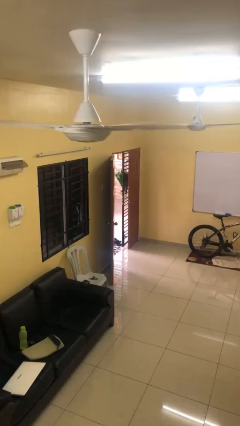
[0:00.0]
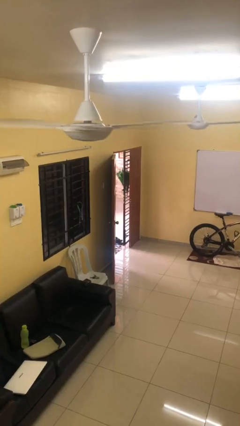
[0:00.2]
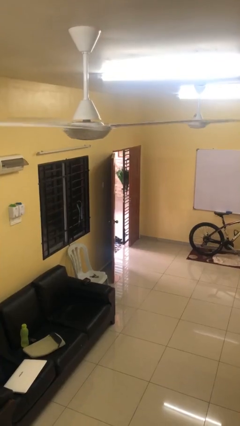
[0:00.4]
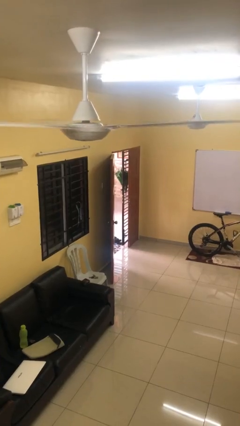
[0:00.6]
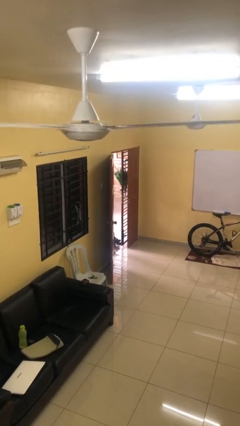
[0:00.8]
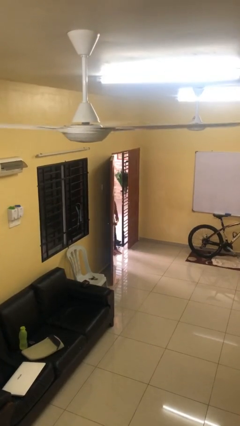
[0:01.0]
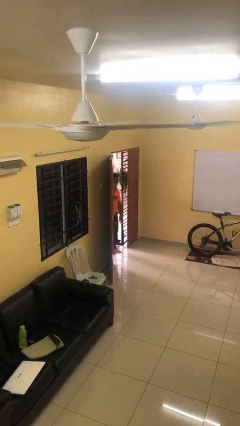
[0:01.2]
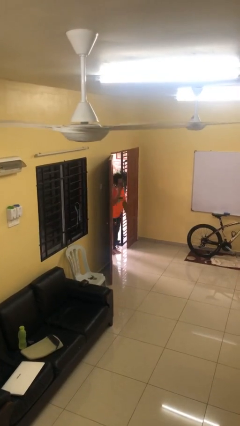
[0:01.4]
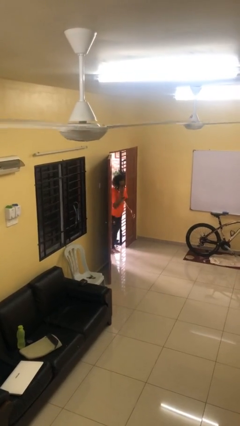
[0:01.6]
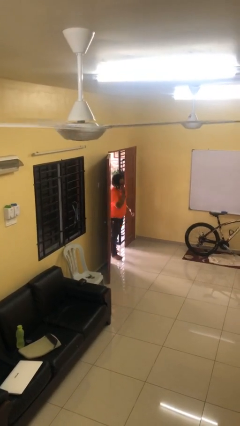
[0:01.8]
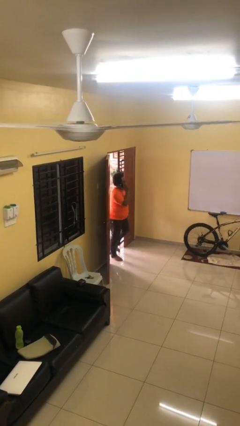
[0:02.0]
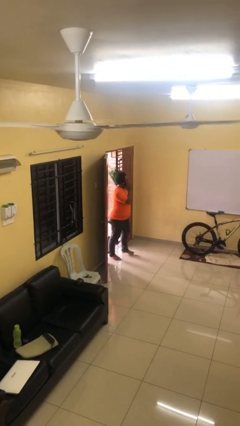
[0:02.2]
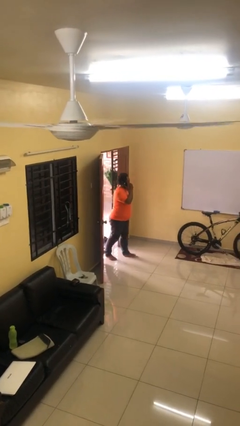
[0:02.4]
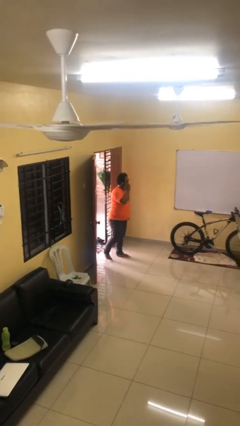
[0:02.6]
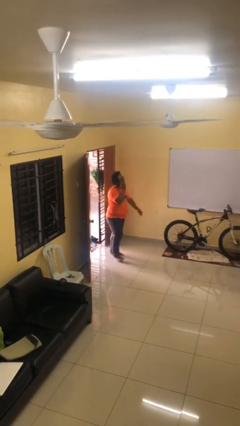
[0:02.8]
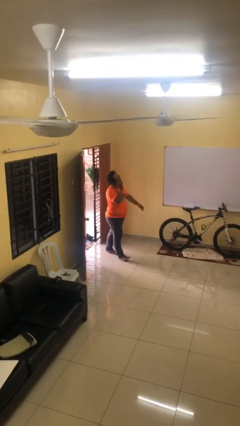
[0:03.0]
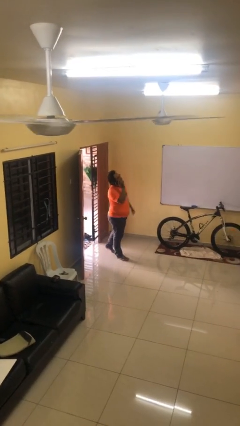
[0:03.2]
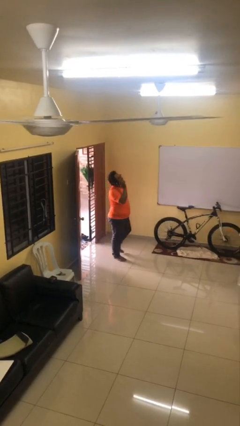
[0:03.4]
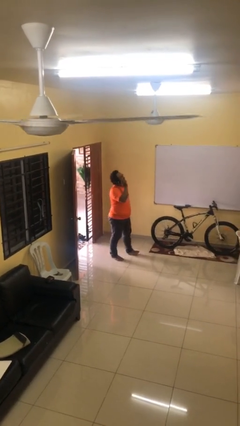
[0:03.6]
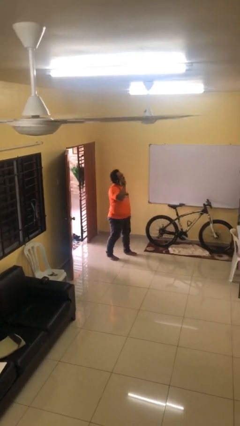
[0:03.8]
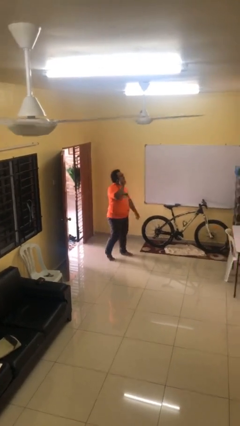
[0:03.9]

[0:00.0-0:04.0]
person enters scene through structure

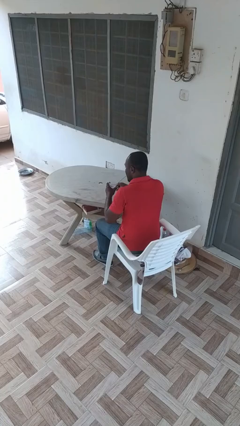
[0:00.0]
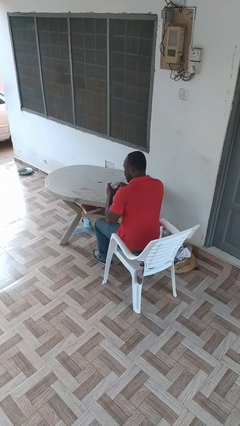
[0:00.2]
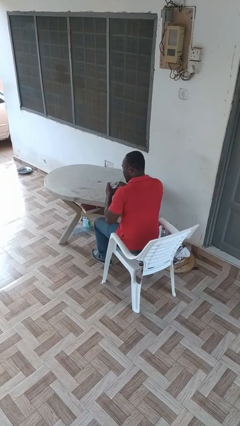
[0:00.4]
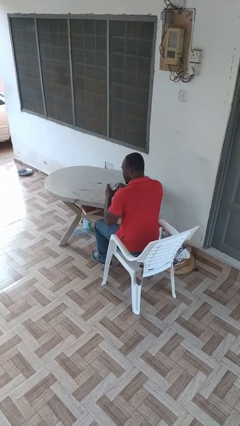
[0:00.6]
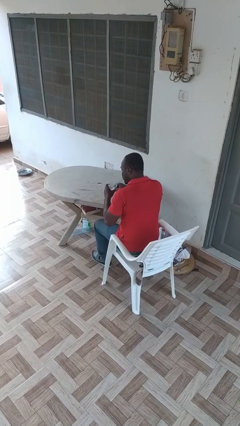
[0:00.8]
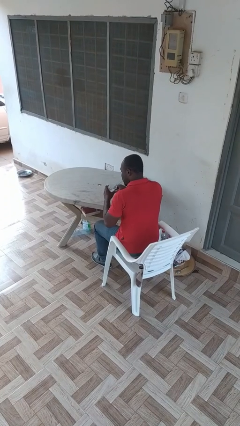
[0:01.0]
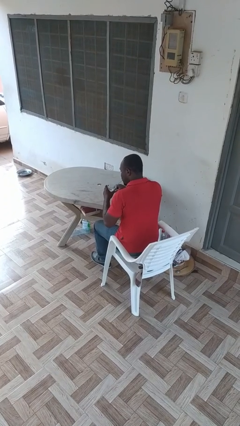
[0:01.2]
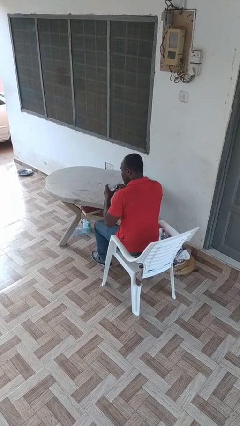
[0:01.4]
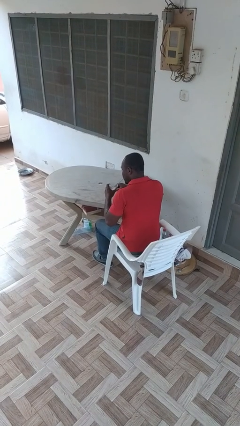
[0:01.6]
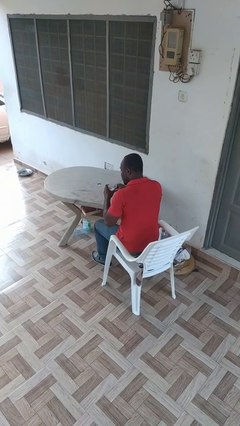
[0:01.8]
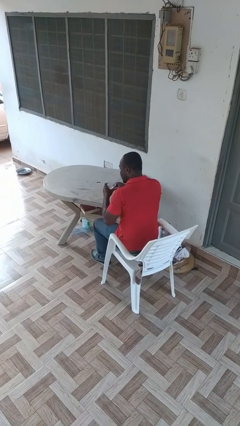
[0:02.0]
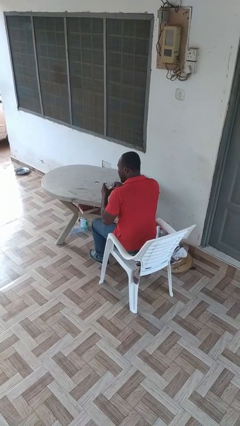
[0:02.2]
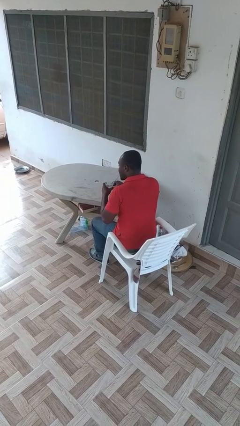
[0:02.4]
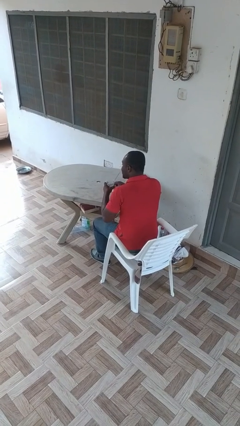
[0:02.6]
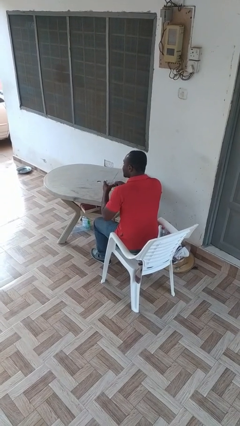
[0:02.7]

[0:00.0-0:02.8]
person drinks from straw

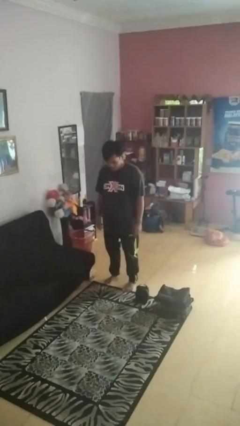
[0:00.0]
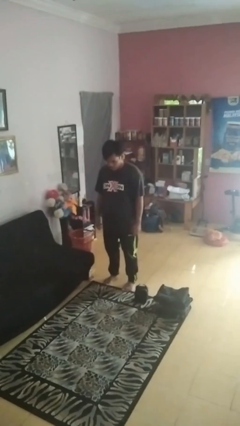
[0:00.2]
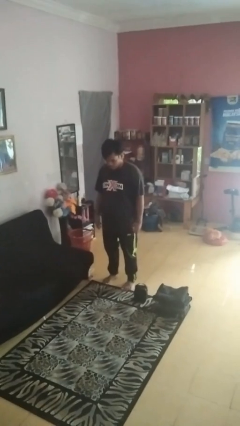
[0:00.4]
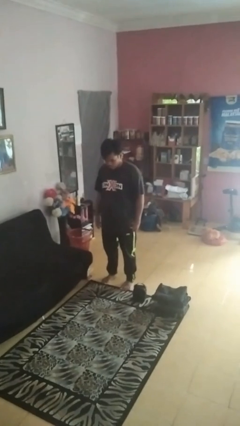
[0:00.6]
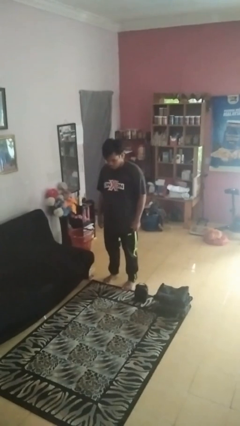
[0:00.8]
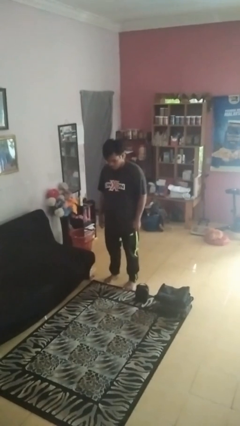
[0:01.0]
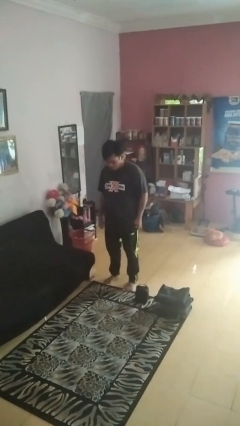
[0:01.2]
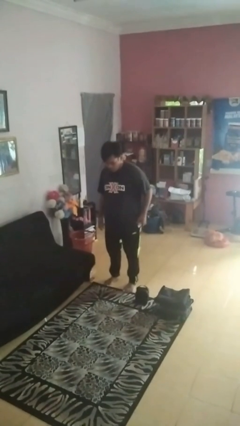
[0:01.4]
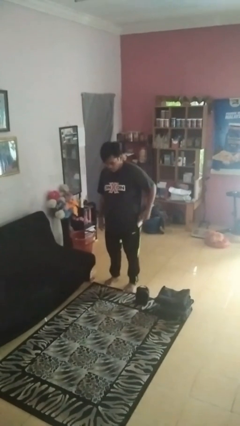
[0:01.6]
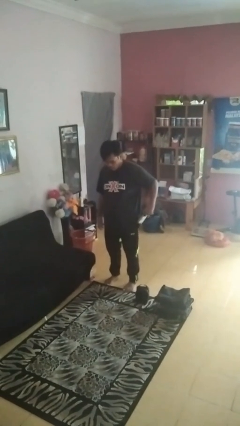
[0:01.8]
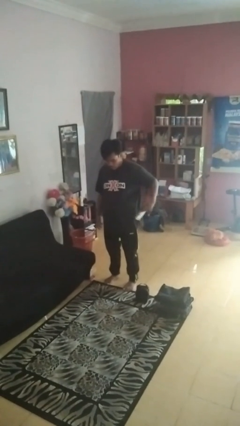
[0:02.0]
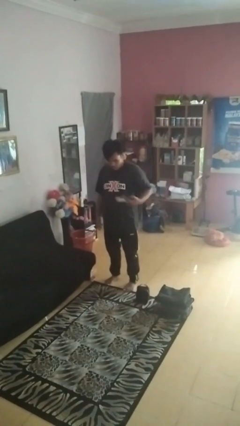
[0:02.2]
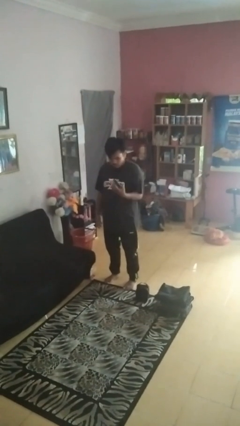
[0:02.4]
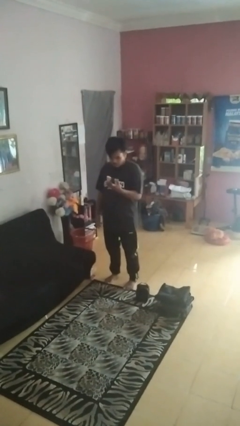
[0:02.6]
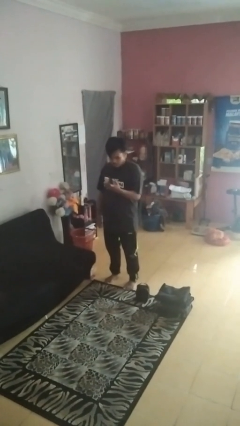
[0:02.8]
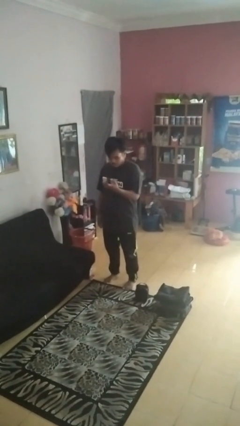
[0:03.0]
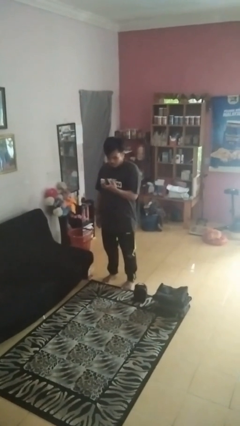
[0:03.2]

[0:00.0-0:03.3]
person takes phone from pocket

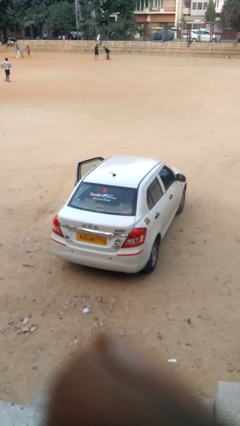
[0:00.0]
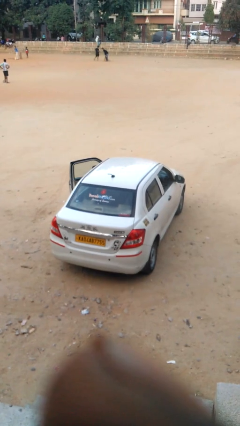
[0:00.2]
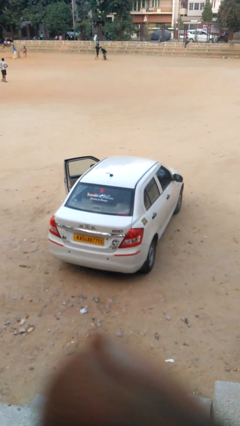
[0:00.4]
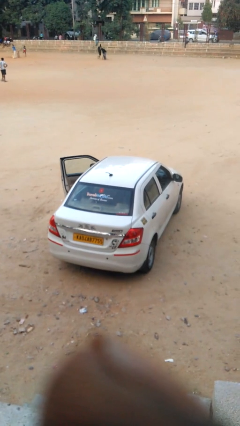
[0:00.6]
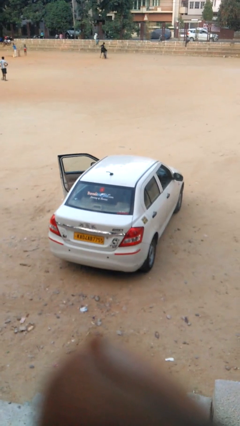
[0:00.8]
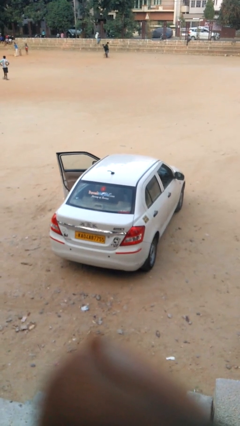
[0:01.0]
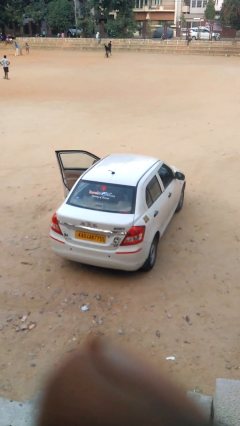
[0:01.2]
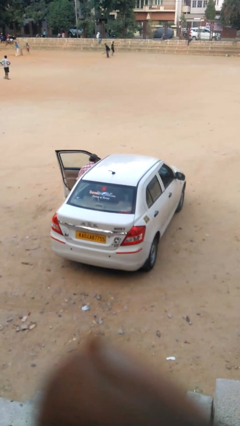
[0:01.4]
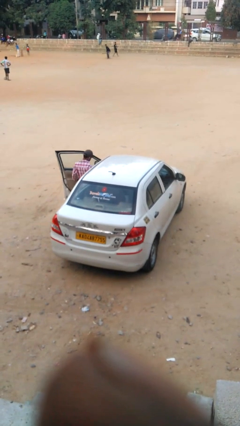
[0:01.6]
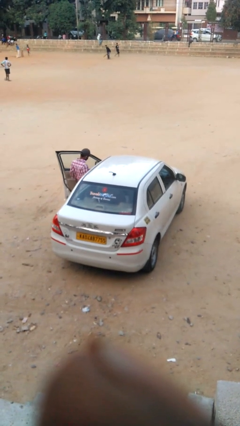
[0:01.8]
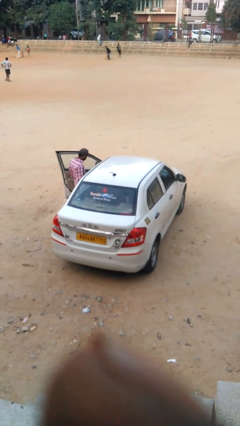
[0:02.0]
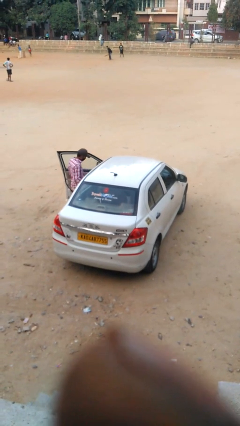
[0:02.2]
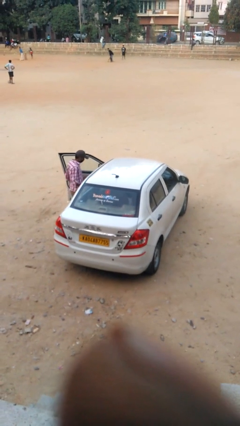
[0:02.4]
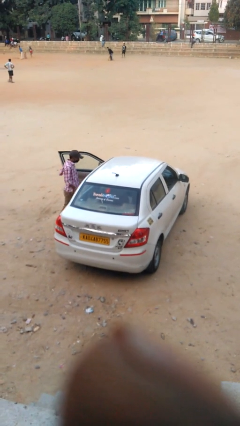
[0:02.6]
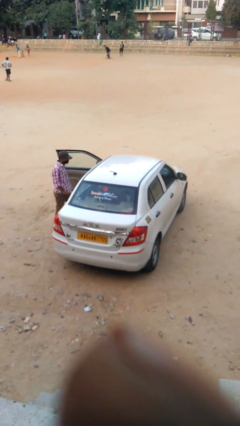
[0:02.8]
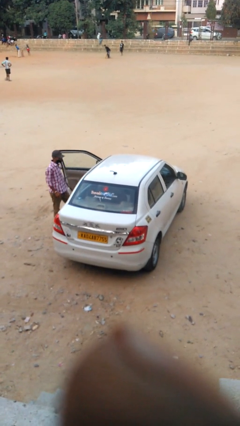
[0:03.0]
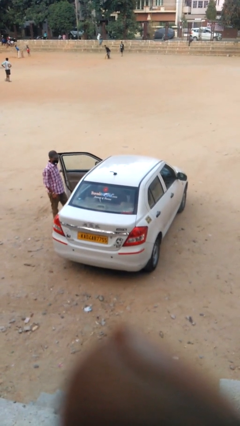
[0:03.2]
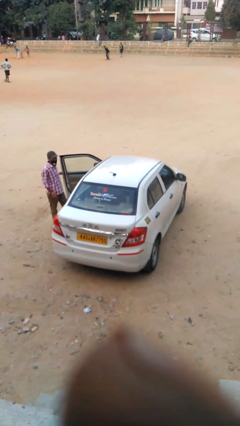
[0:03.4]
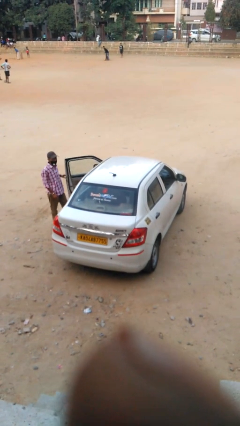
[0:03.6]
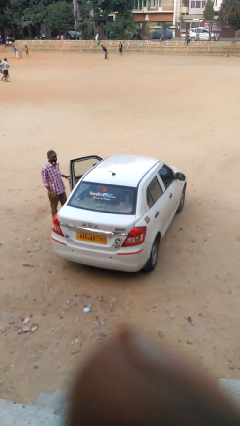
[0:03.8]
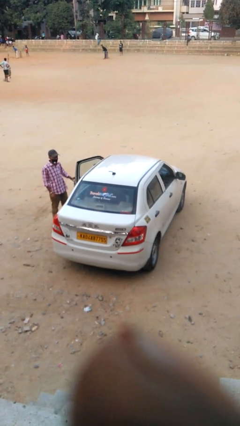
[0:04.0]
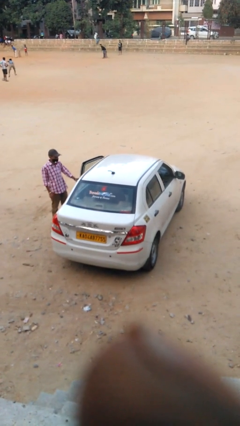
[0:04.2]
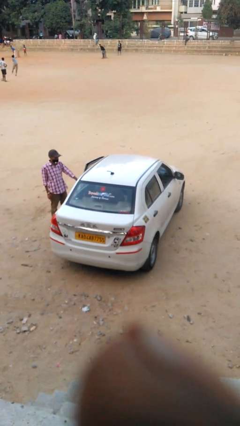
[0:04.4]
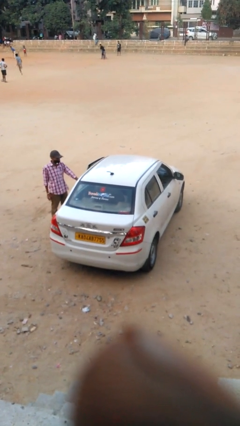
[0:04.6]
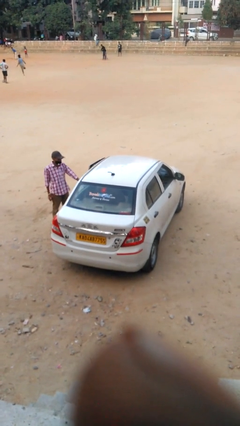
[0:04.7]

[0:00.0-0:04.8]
car drops off person

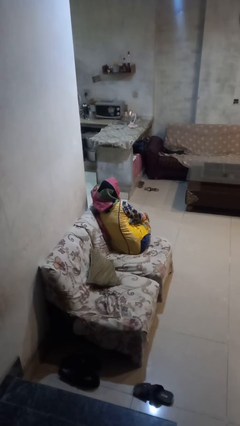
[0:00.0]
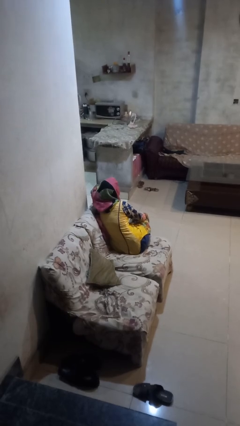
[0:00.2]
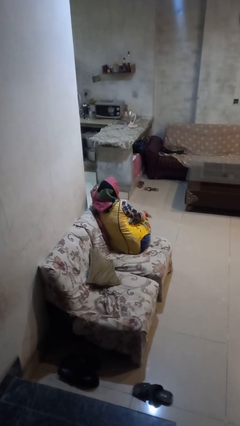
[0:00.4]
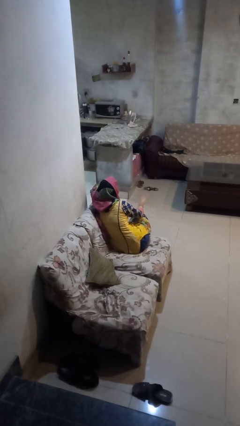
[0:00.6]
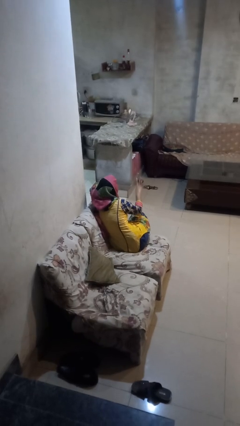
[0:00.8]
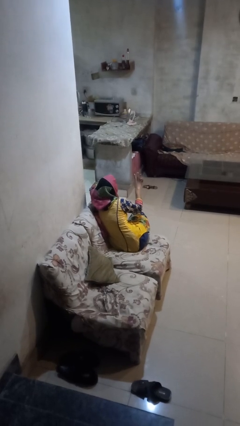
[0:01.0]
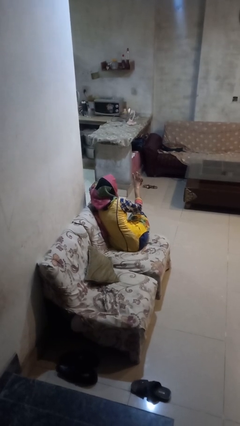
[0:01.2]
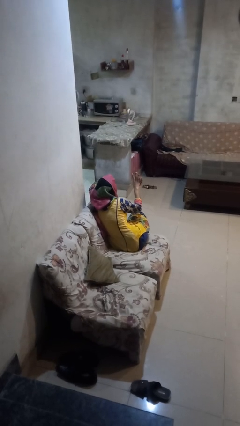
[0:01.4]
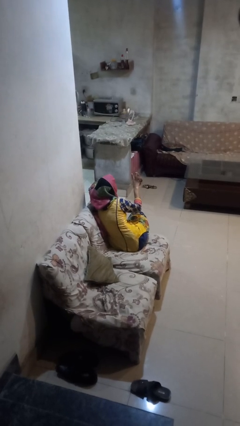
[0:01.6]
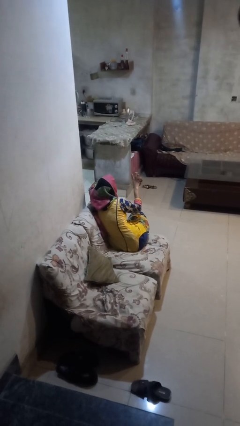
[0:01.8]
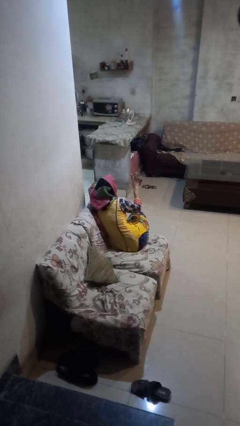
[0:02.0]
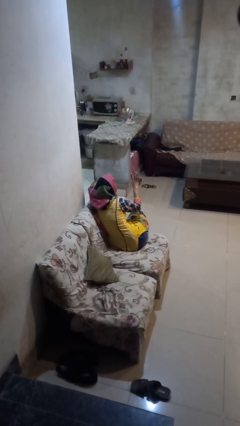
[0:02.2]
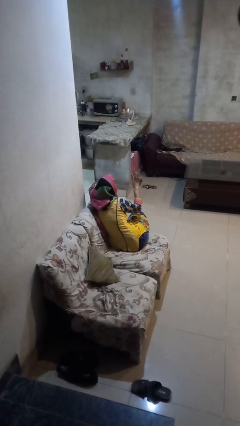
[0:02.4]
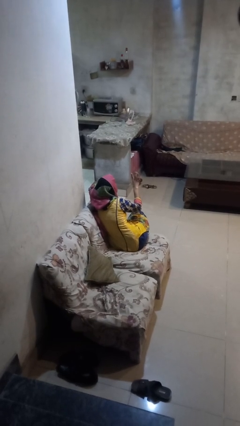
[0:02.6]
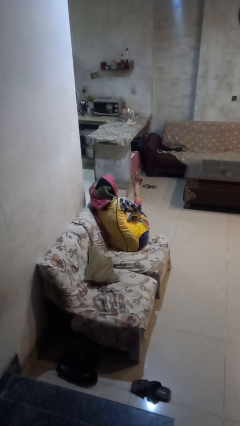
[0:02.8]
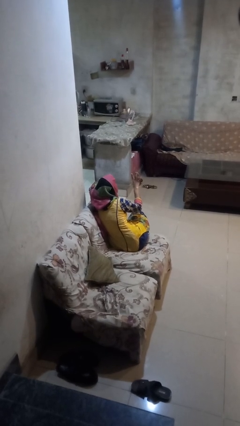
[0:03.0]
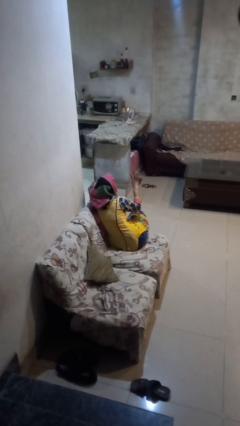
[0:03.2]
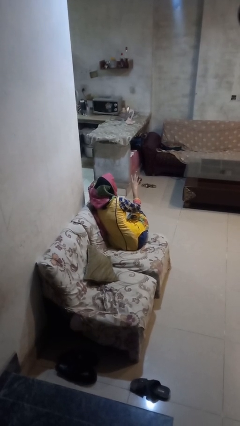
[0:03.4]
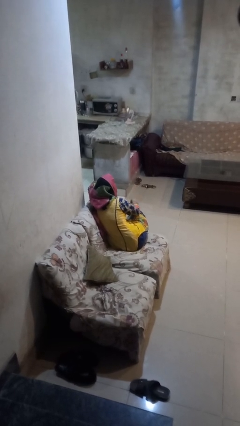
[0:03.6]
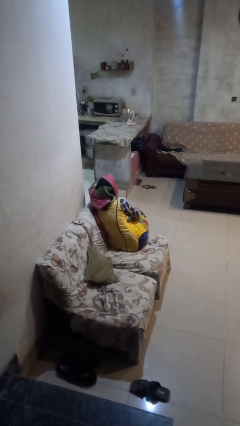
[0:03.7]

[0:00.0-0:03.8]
person gestures number four
